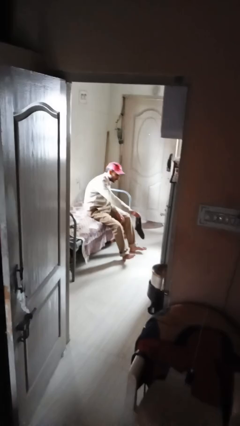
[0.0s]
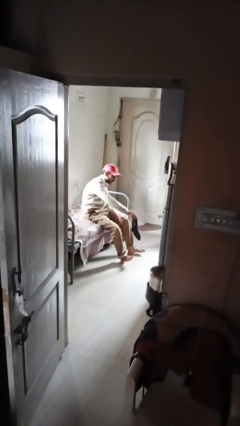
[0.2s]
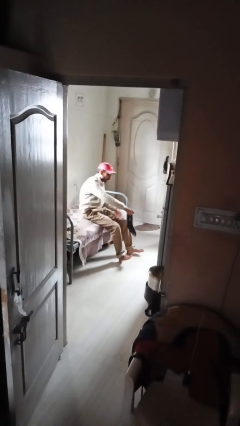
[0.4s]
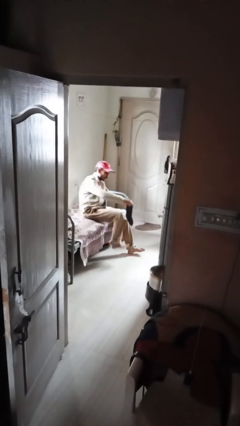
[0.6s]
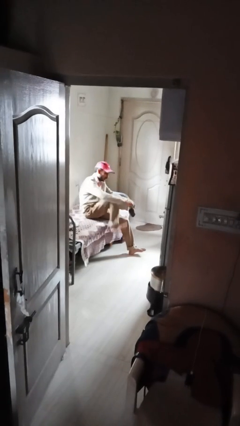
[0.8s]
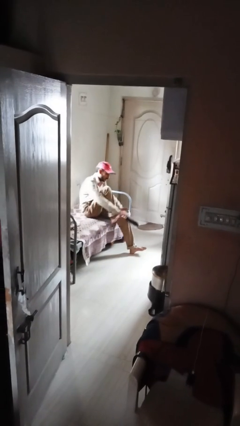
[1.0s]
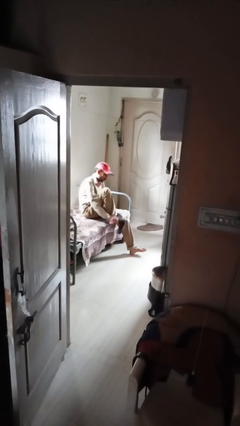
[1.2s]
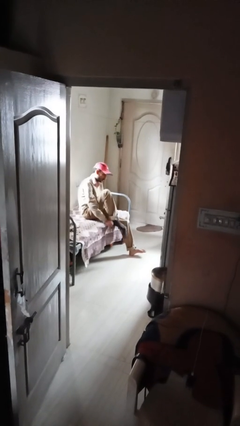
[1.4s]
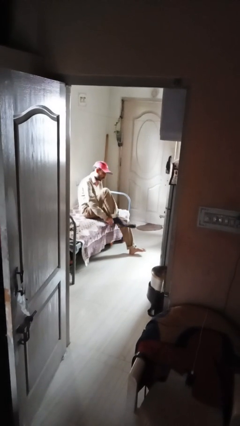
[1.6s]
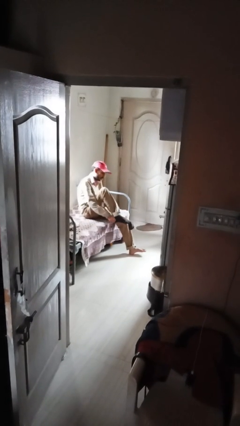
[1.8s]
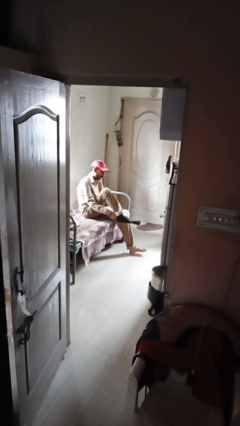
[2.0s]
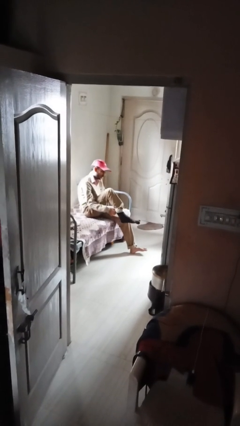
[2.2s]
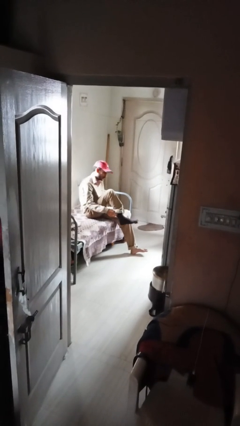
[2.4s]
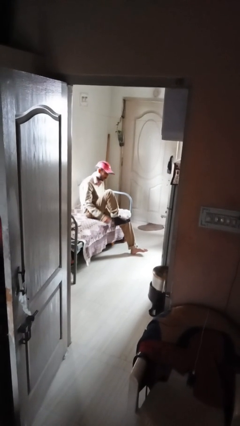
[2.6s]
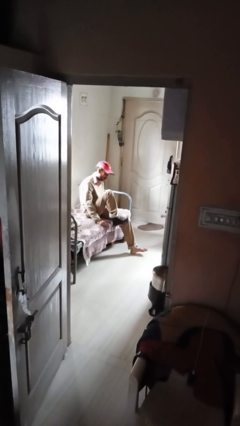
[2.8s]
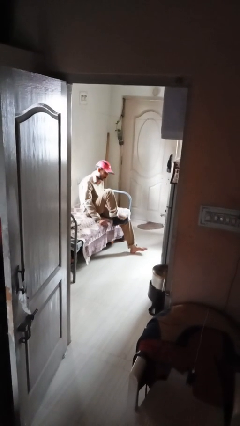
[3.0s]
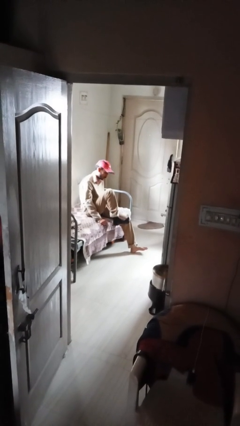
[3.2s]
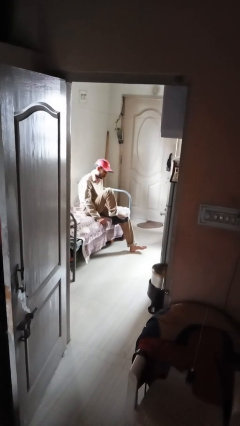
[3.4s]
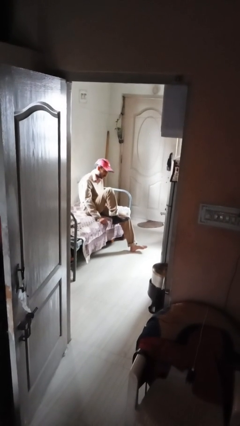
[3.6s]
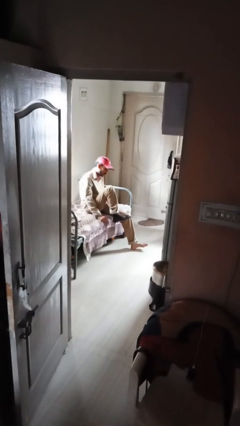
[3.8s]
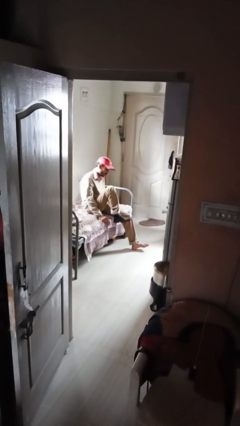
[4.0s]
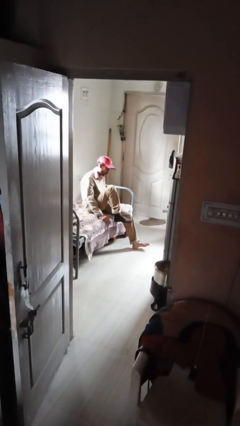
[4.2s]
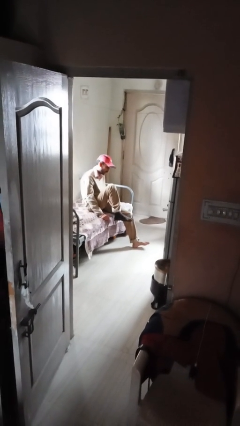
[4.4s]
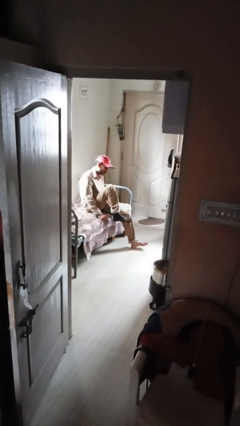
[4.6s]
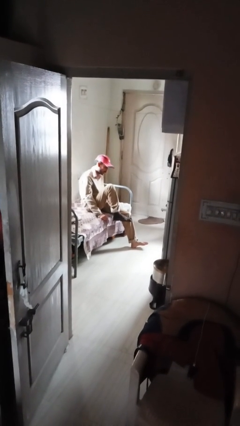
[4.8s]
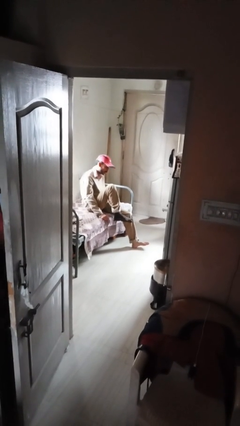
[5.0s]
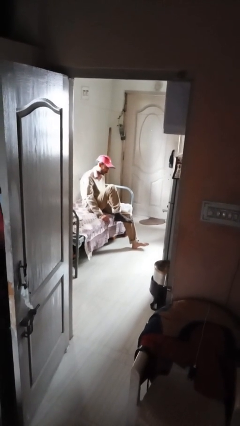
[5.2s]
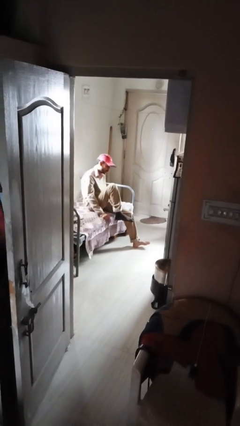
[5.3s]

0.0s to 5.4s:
person puts on socks

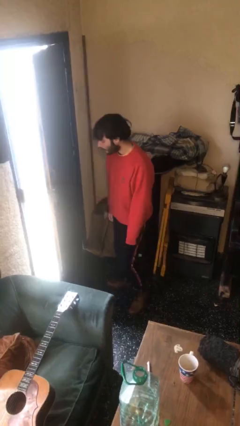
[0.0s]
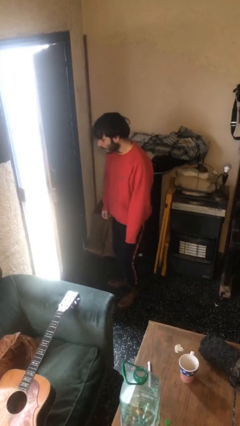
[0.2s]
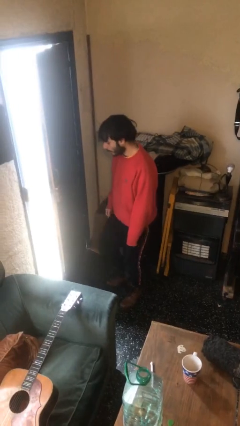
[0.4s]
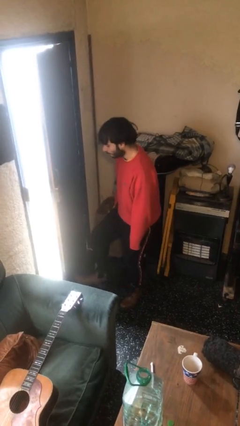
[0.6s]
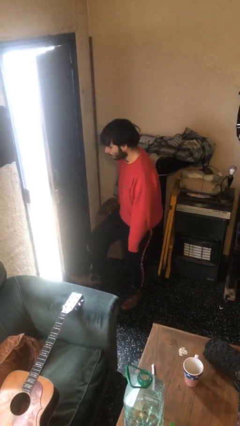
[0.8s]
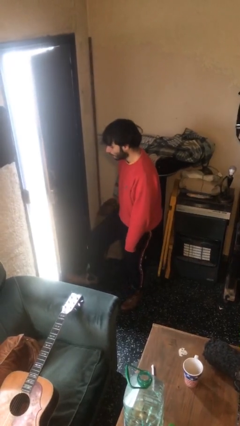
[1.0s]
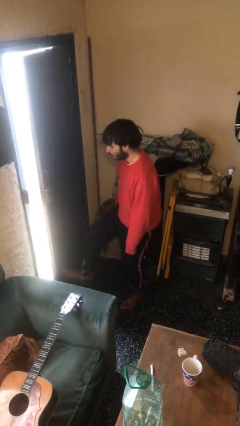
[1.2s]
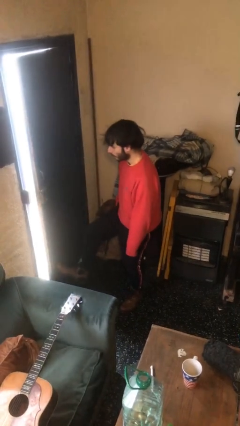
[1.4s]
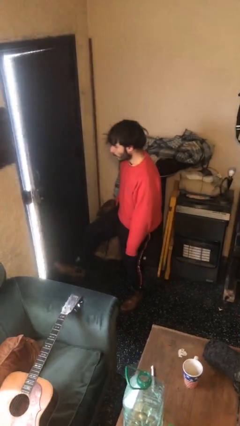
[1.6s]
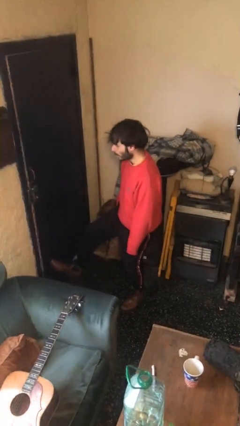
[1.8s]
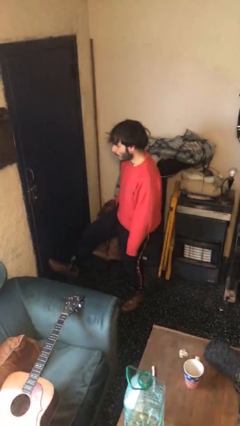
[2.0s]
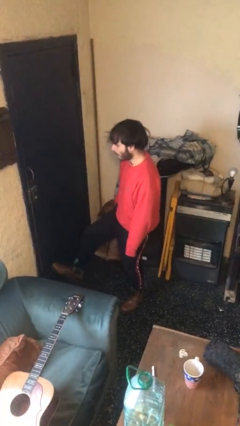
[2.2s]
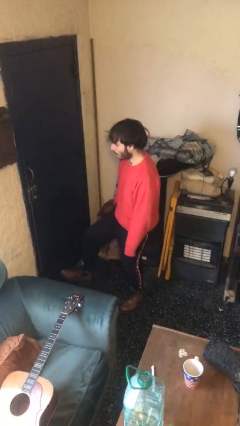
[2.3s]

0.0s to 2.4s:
person closes door with foot

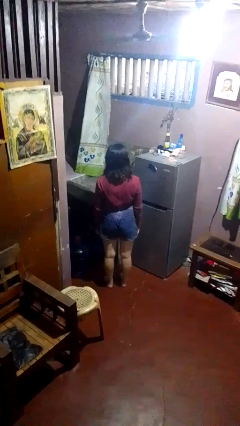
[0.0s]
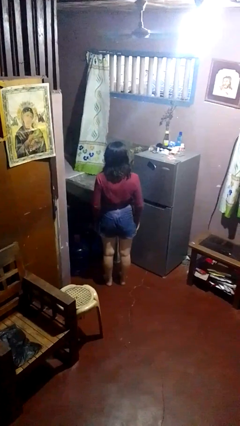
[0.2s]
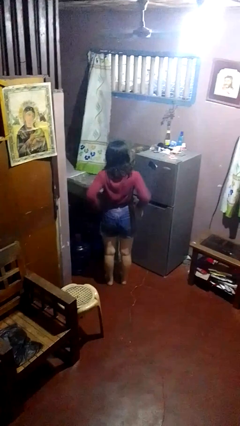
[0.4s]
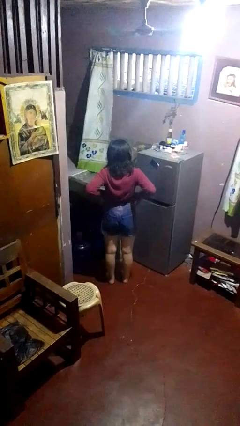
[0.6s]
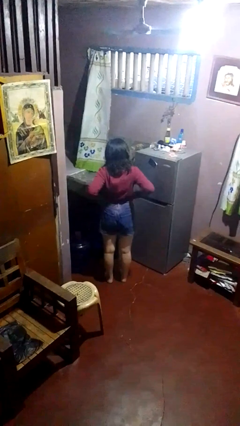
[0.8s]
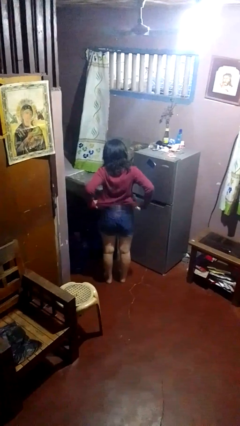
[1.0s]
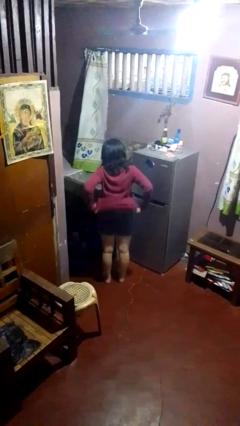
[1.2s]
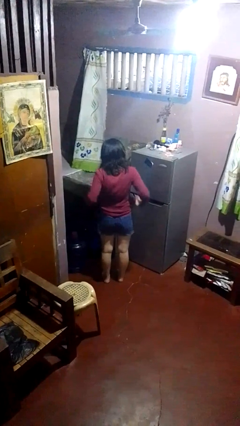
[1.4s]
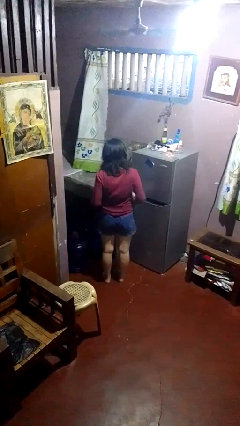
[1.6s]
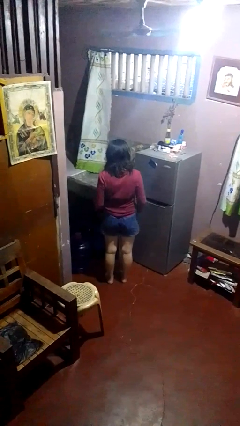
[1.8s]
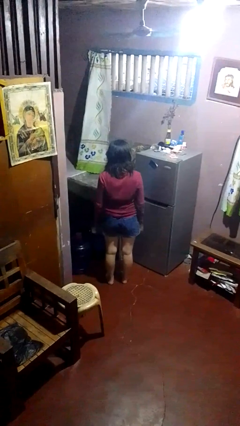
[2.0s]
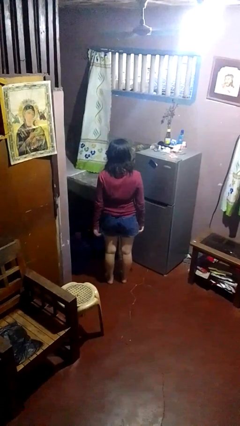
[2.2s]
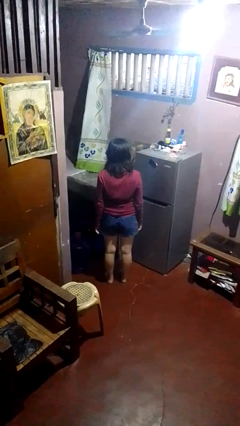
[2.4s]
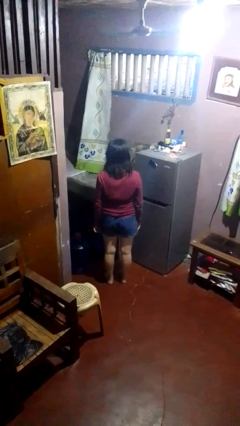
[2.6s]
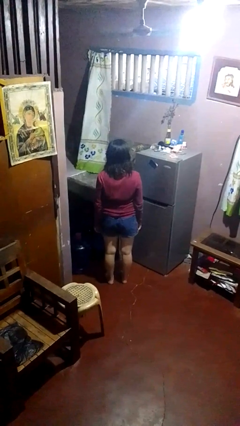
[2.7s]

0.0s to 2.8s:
person untucks shirt

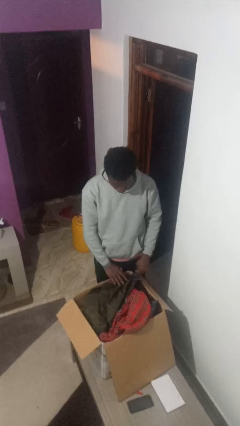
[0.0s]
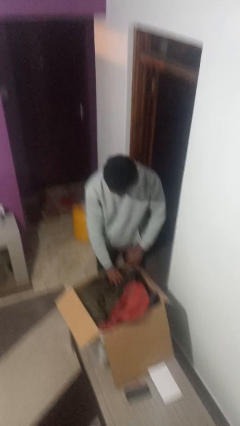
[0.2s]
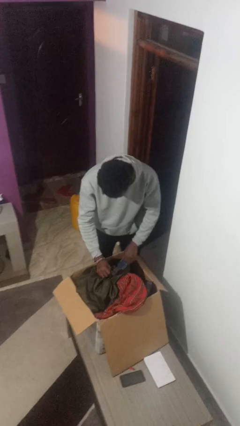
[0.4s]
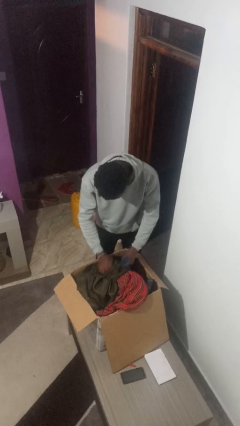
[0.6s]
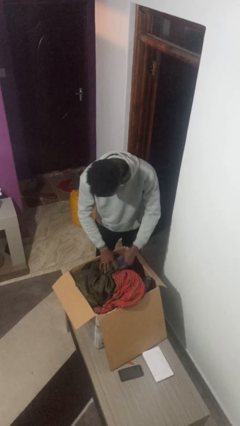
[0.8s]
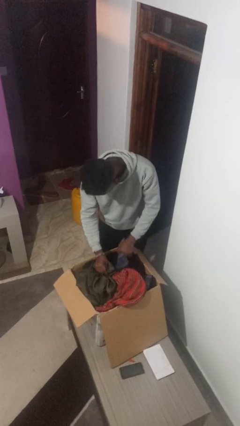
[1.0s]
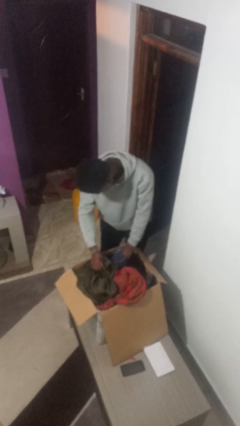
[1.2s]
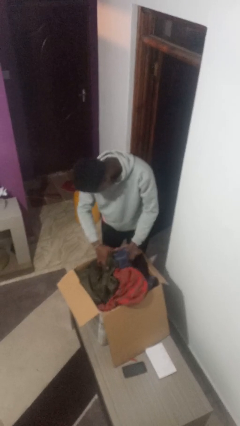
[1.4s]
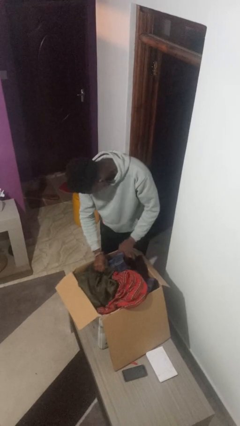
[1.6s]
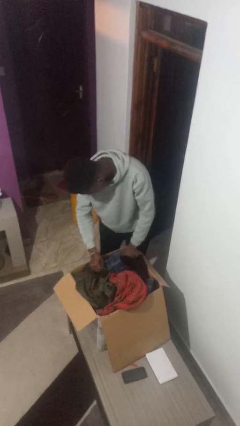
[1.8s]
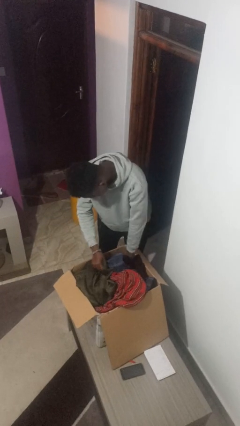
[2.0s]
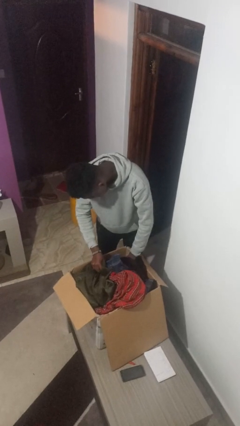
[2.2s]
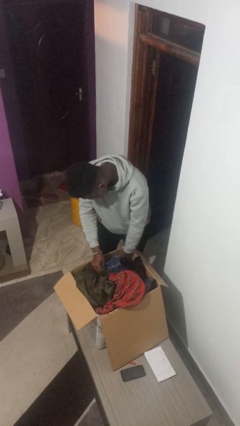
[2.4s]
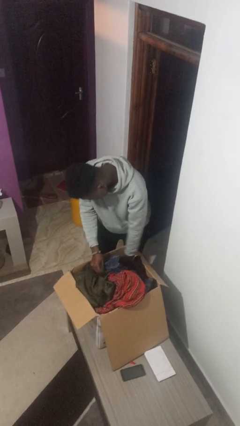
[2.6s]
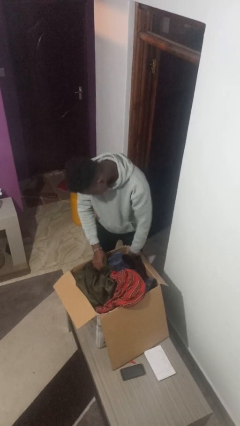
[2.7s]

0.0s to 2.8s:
person searches in box

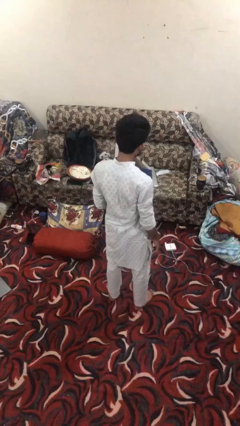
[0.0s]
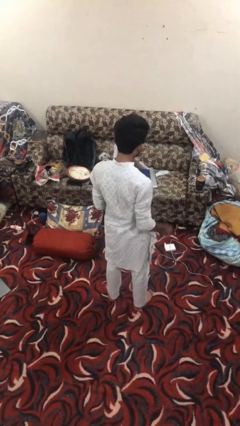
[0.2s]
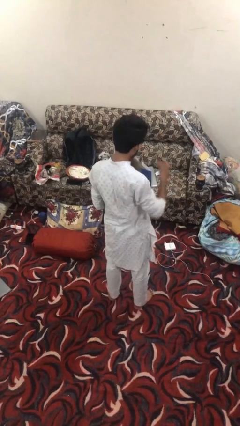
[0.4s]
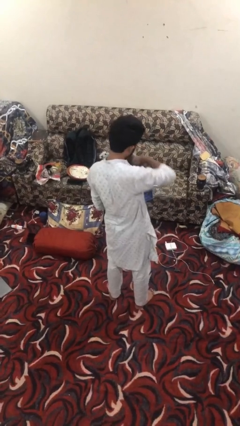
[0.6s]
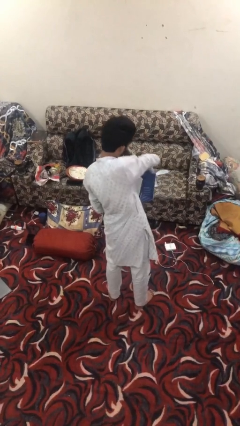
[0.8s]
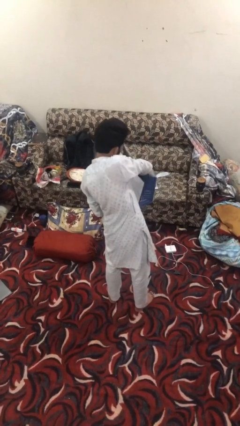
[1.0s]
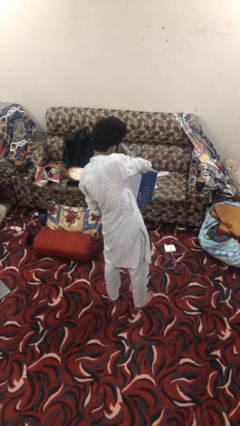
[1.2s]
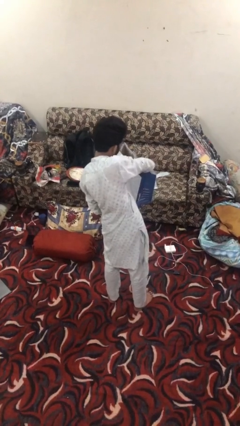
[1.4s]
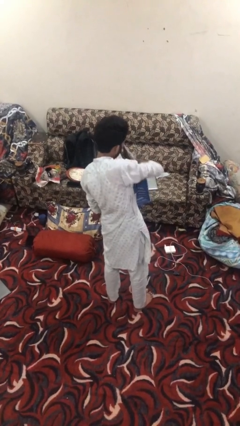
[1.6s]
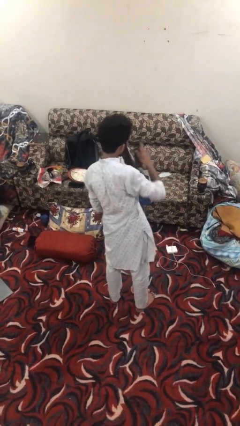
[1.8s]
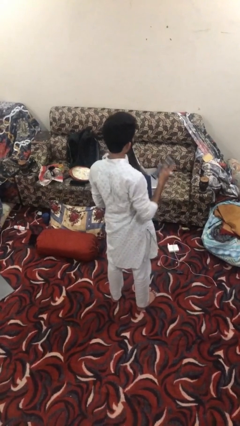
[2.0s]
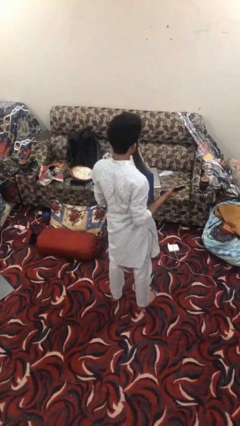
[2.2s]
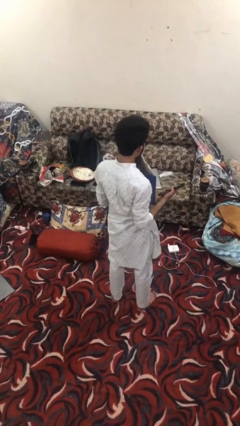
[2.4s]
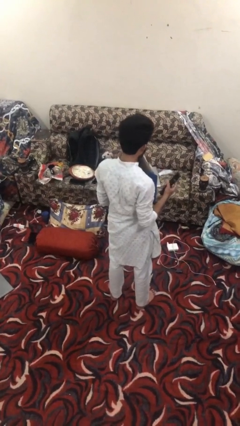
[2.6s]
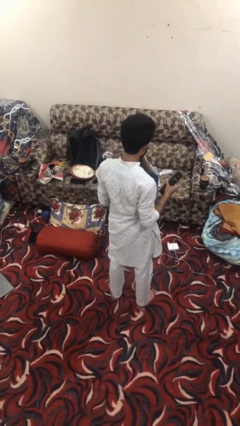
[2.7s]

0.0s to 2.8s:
person takes object from bag

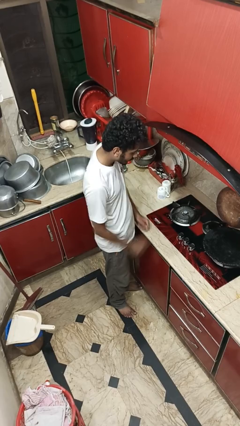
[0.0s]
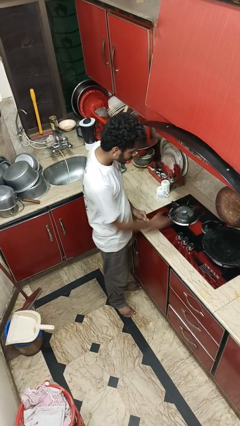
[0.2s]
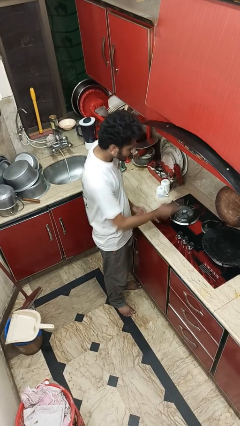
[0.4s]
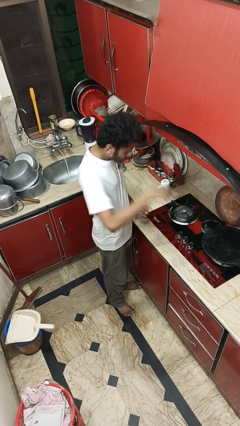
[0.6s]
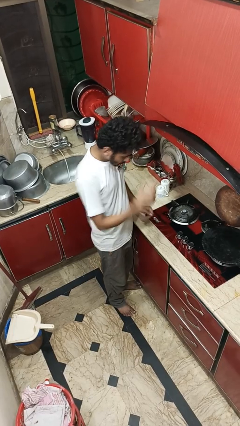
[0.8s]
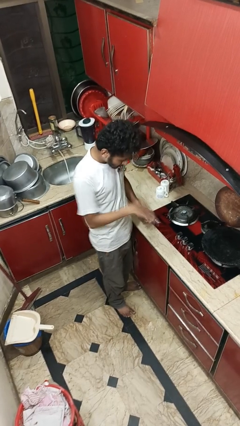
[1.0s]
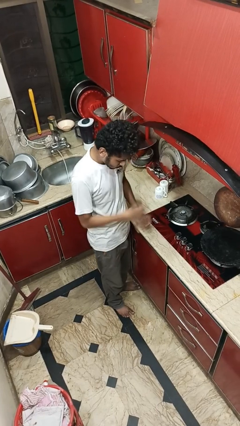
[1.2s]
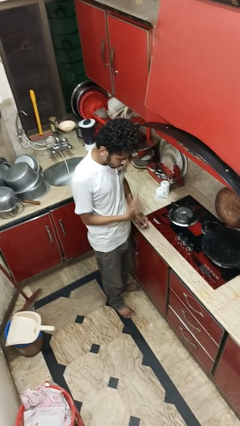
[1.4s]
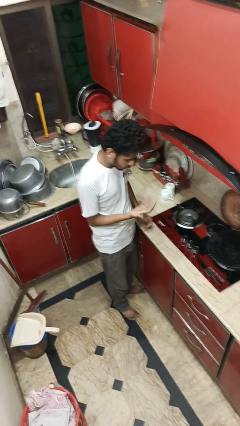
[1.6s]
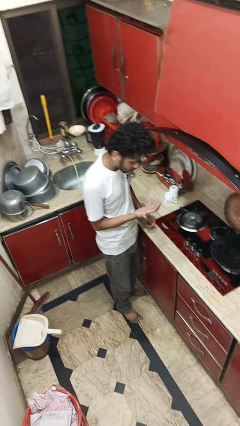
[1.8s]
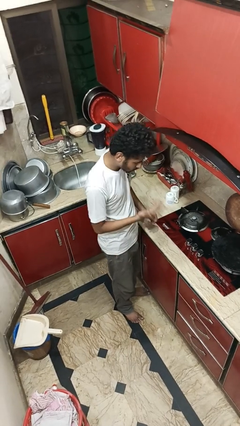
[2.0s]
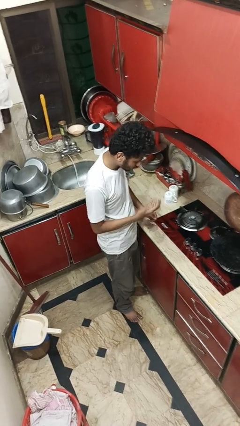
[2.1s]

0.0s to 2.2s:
person burns hand
